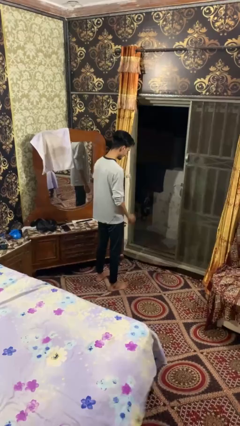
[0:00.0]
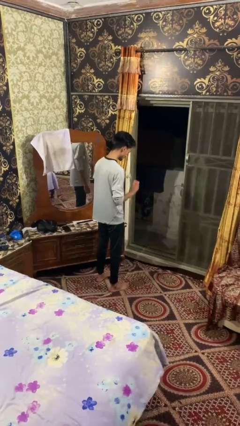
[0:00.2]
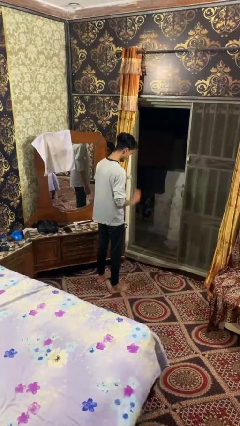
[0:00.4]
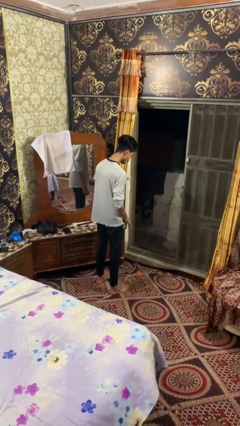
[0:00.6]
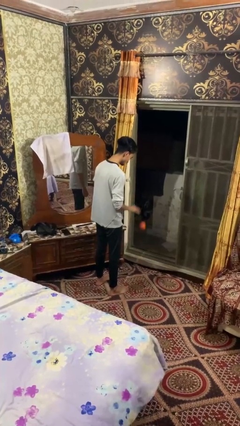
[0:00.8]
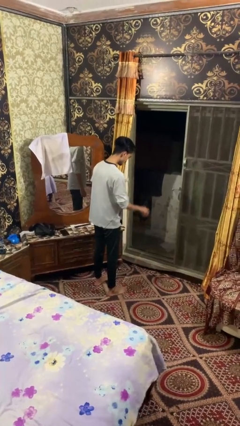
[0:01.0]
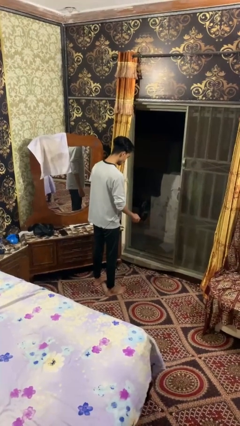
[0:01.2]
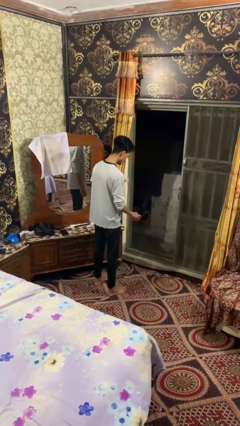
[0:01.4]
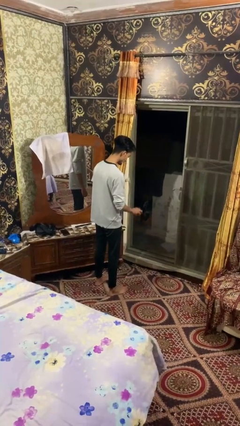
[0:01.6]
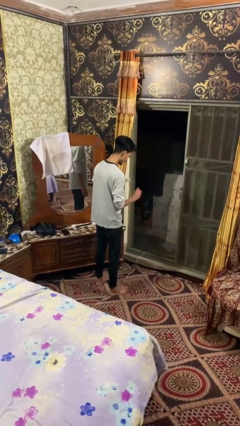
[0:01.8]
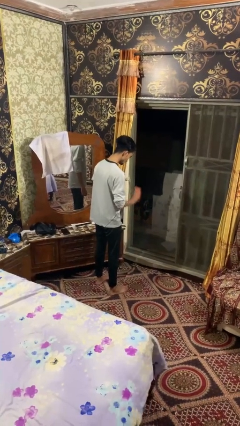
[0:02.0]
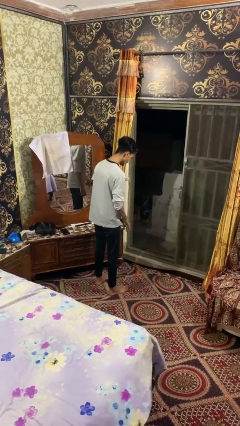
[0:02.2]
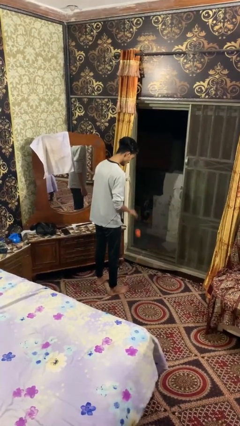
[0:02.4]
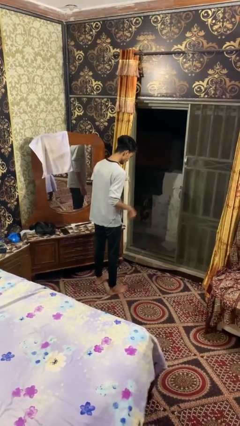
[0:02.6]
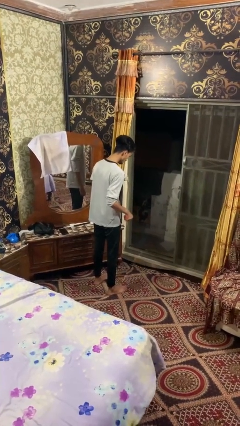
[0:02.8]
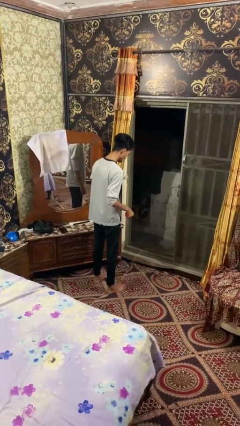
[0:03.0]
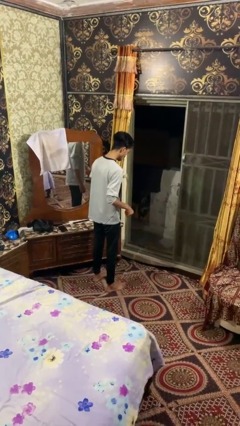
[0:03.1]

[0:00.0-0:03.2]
person bounces ball on floor

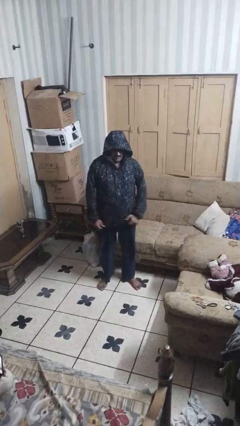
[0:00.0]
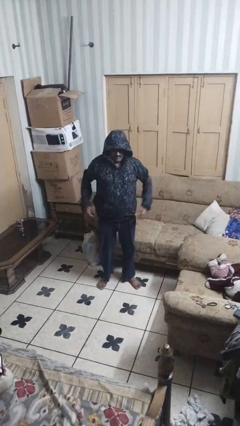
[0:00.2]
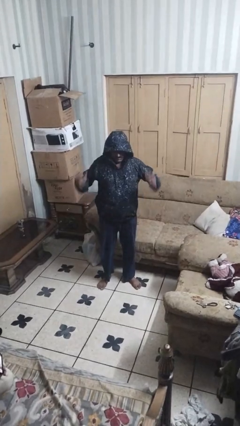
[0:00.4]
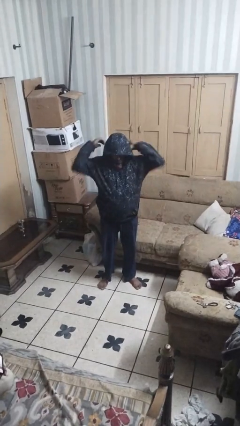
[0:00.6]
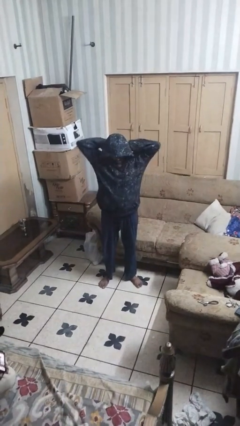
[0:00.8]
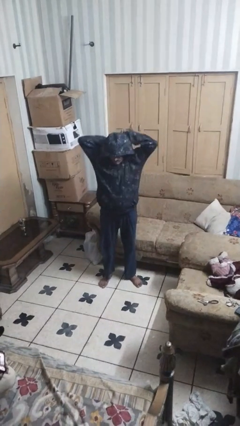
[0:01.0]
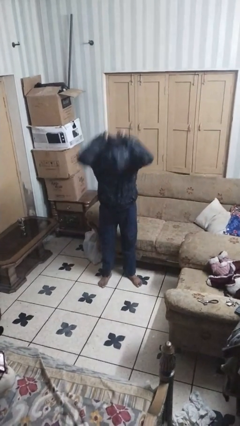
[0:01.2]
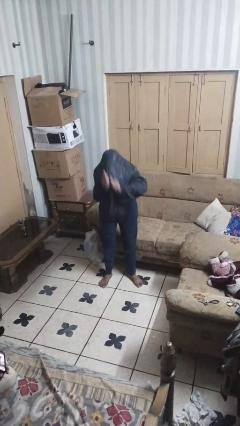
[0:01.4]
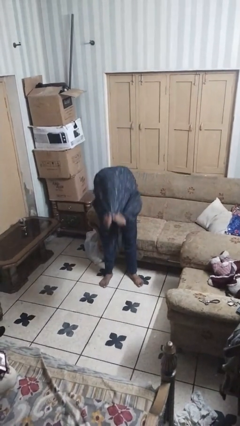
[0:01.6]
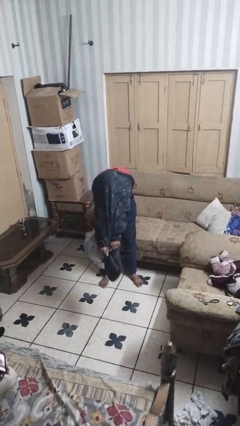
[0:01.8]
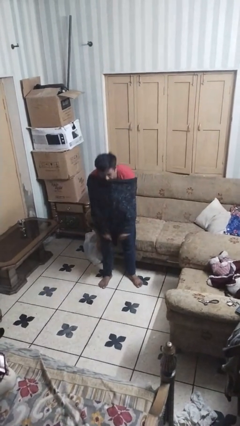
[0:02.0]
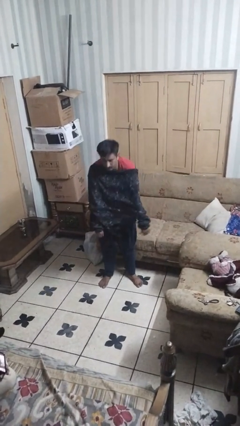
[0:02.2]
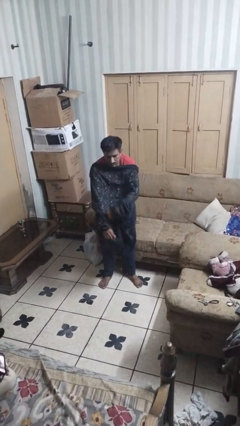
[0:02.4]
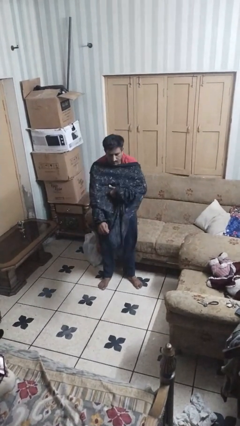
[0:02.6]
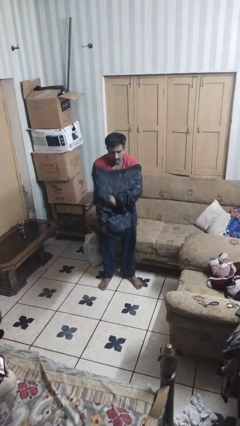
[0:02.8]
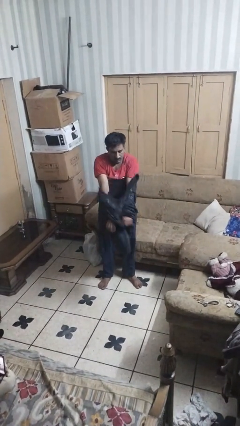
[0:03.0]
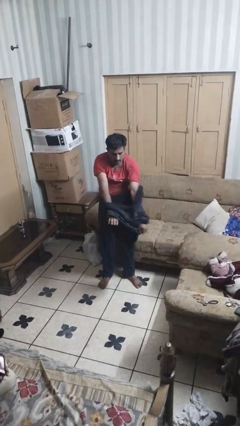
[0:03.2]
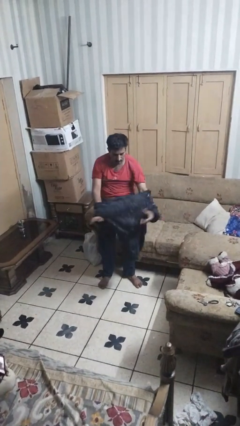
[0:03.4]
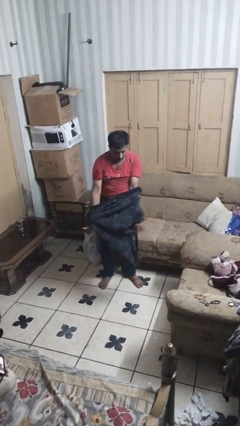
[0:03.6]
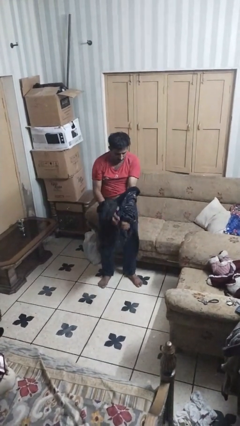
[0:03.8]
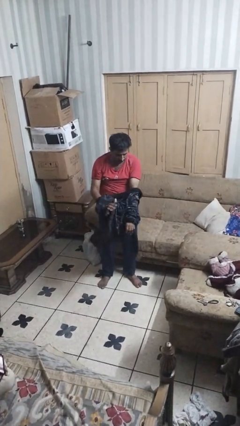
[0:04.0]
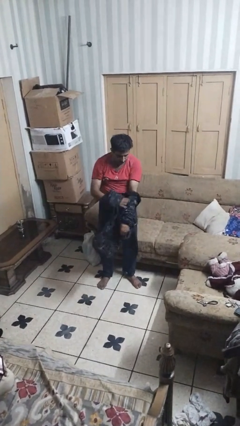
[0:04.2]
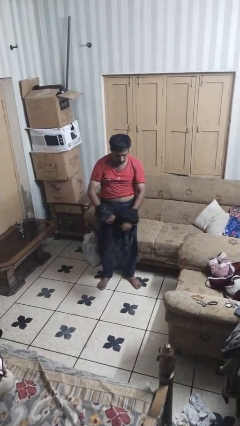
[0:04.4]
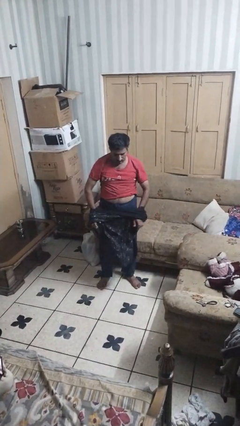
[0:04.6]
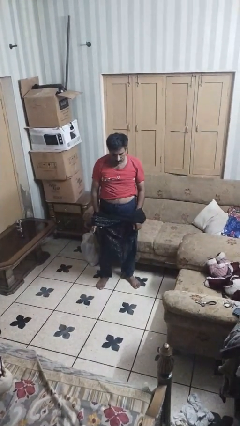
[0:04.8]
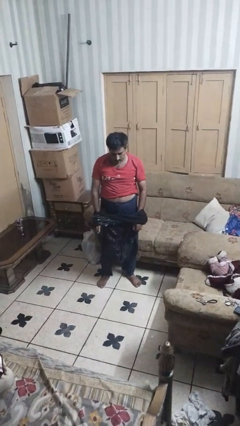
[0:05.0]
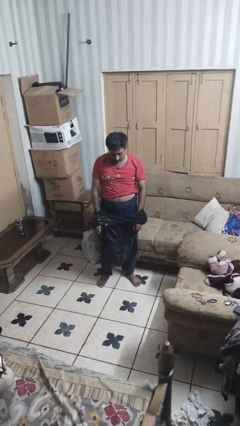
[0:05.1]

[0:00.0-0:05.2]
person takes off hoodie

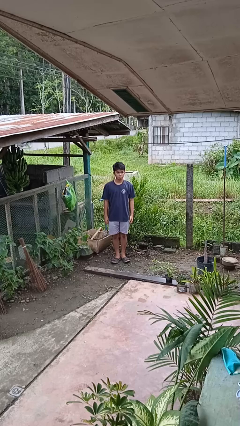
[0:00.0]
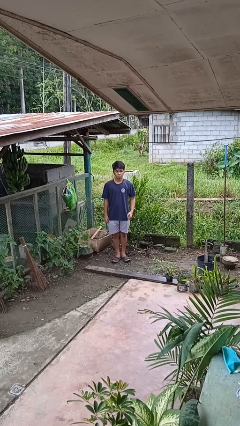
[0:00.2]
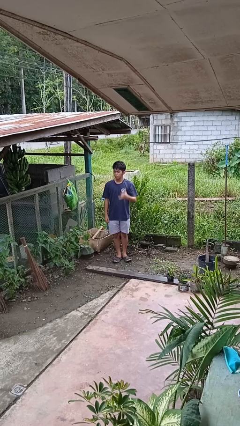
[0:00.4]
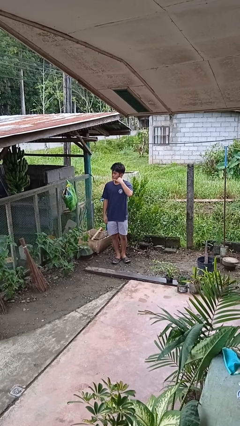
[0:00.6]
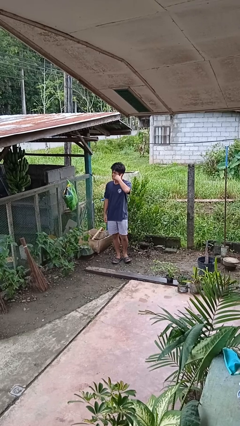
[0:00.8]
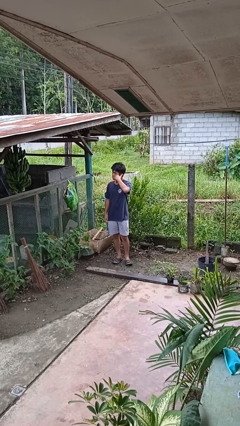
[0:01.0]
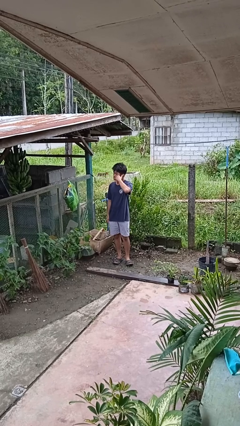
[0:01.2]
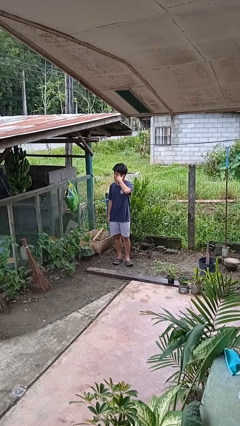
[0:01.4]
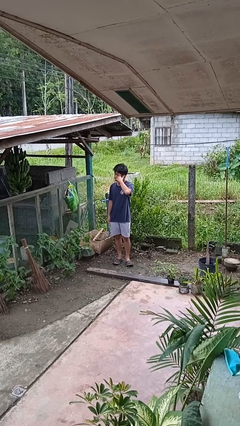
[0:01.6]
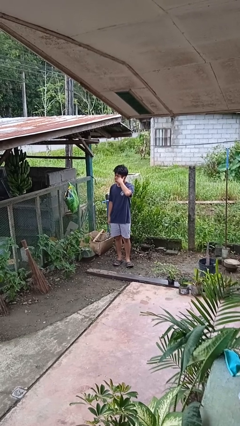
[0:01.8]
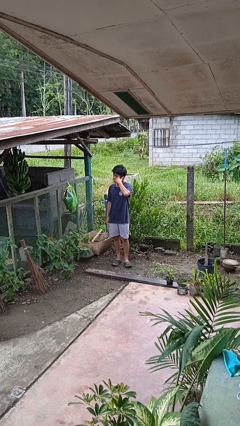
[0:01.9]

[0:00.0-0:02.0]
person gestures call me

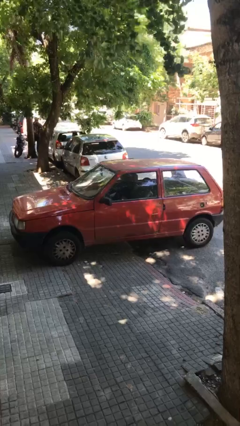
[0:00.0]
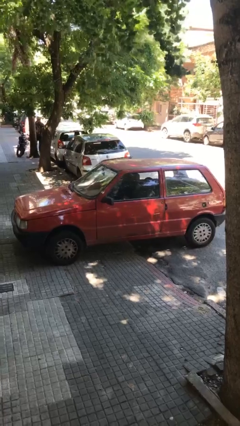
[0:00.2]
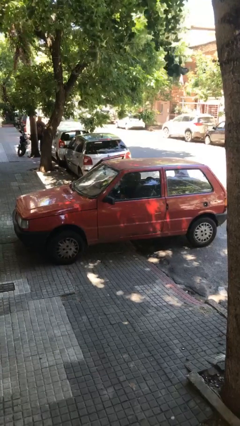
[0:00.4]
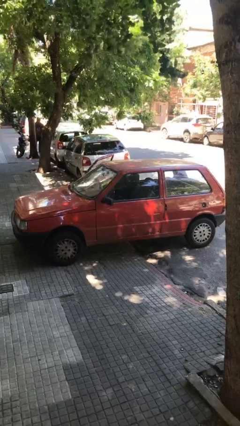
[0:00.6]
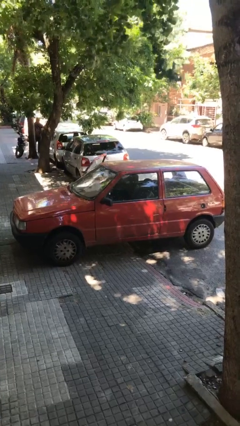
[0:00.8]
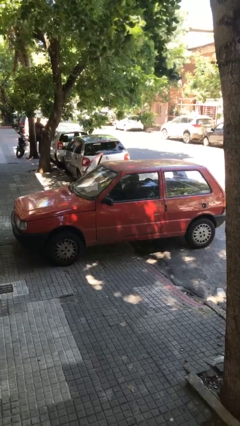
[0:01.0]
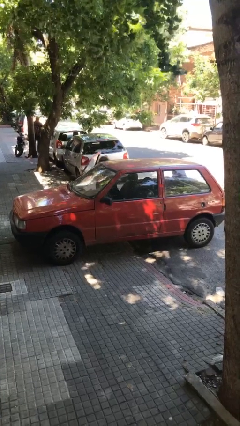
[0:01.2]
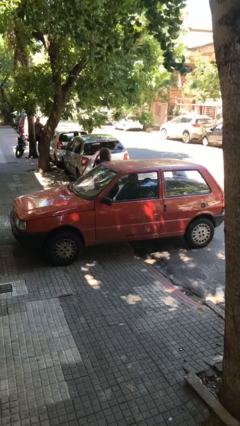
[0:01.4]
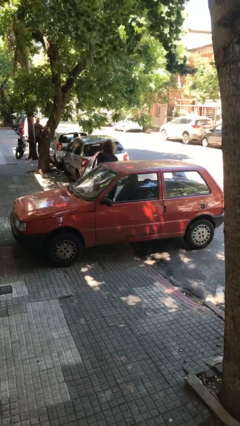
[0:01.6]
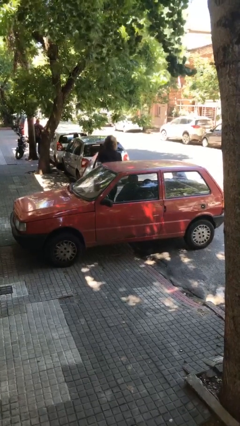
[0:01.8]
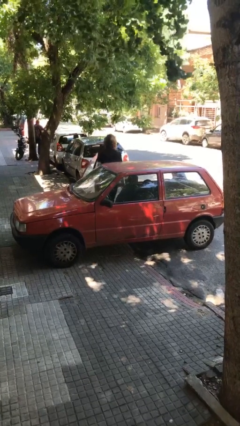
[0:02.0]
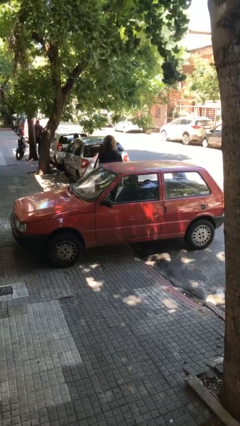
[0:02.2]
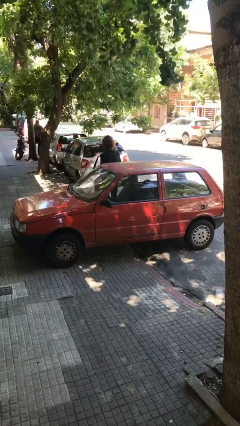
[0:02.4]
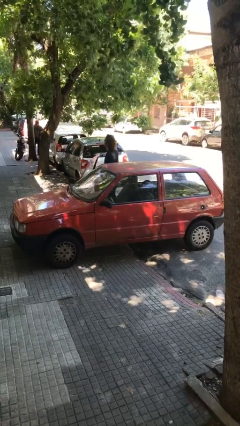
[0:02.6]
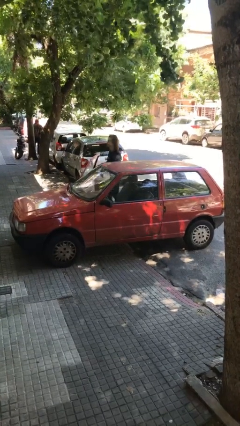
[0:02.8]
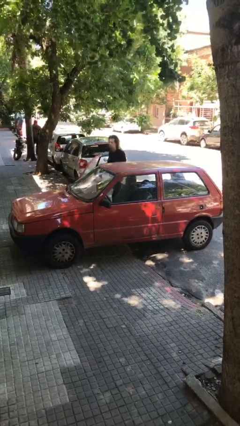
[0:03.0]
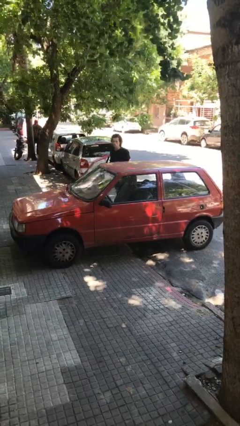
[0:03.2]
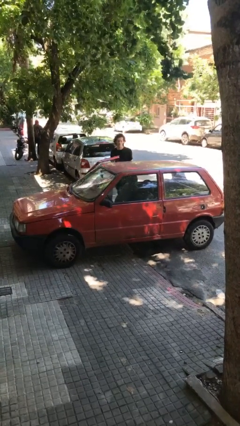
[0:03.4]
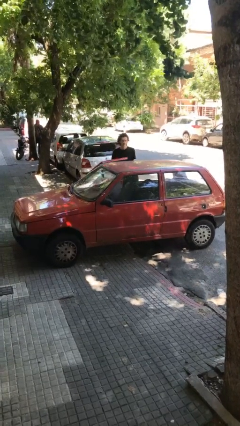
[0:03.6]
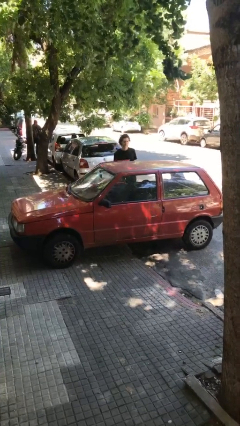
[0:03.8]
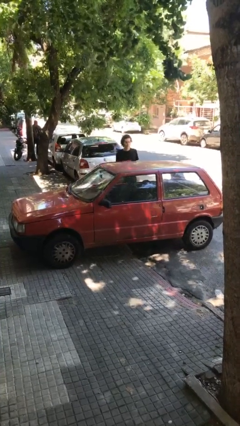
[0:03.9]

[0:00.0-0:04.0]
car drops off person

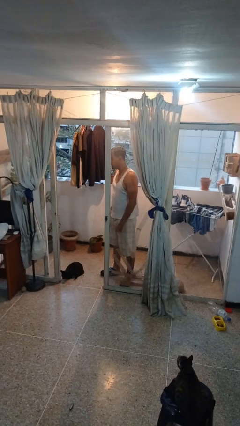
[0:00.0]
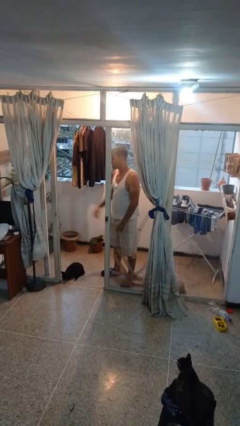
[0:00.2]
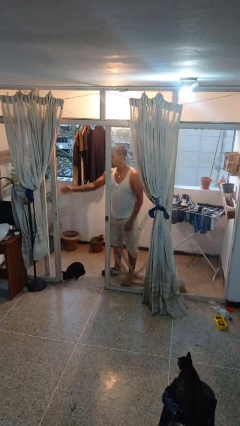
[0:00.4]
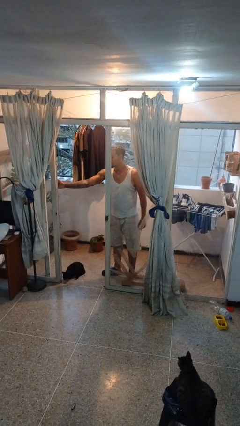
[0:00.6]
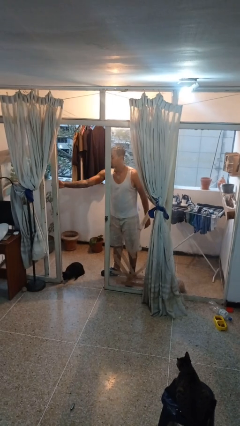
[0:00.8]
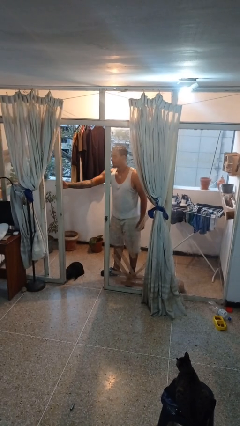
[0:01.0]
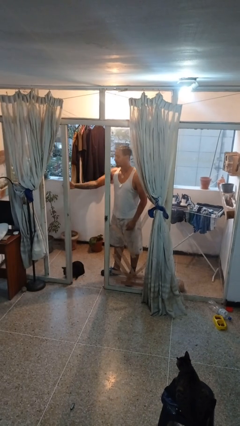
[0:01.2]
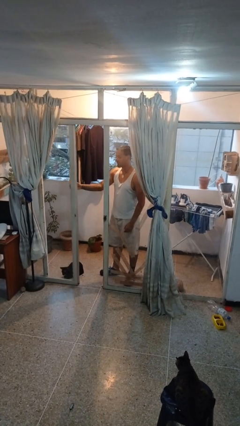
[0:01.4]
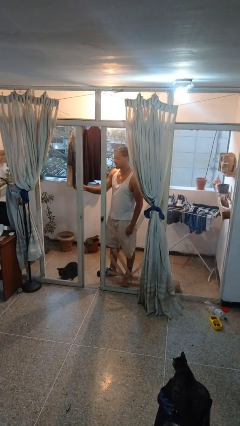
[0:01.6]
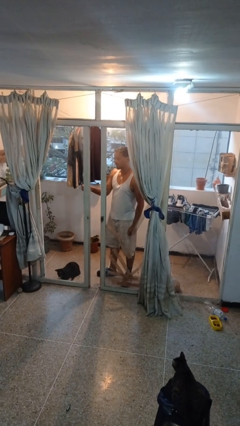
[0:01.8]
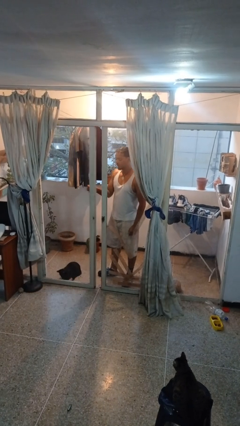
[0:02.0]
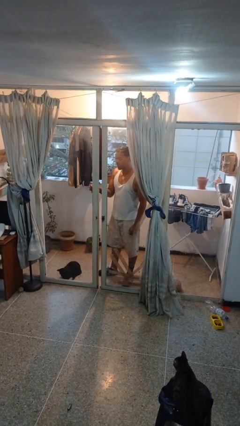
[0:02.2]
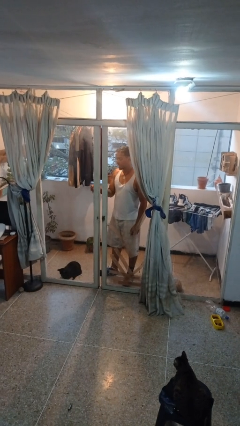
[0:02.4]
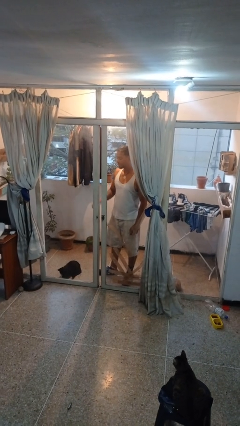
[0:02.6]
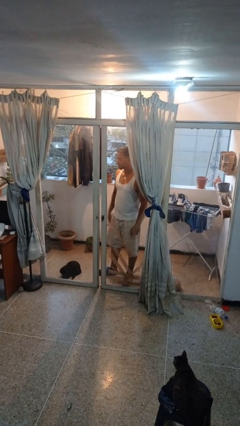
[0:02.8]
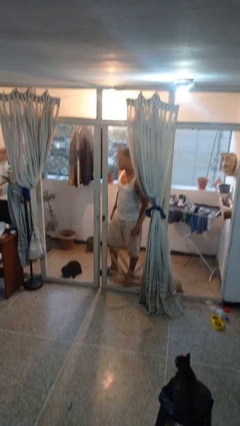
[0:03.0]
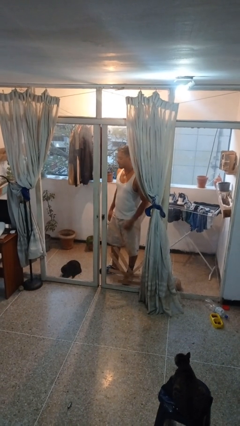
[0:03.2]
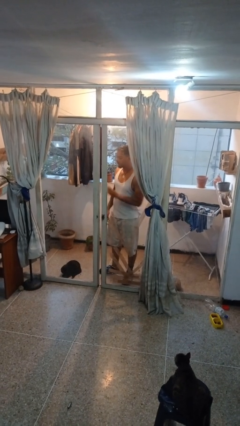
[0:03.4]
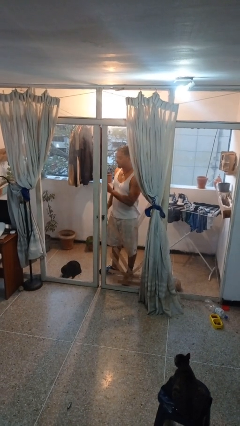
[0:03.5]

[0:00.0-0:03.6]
person closes sliding door
